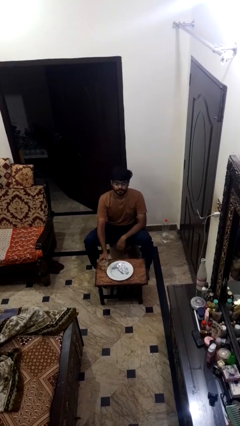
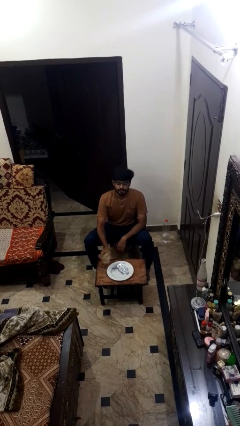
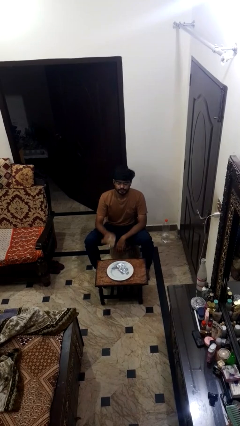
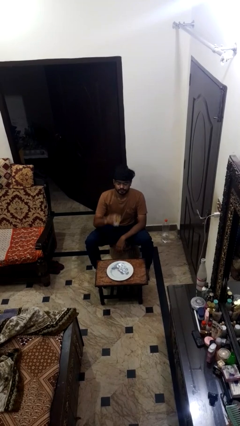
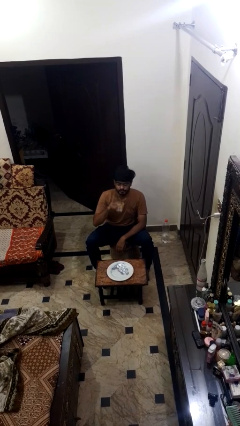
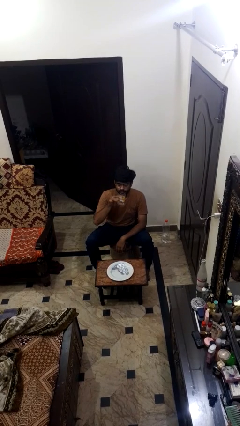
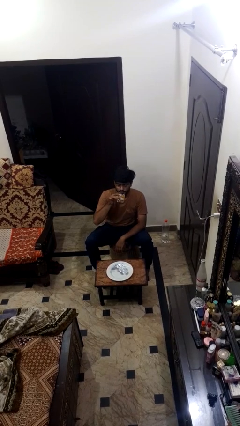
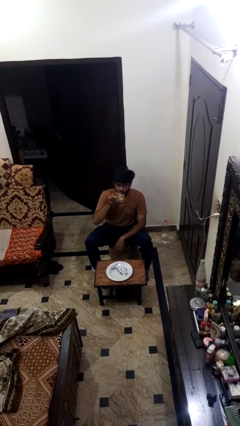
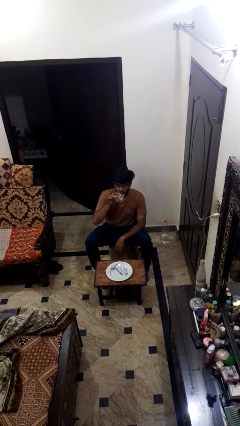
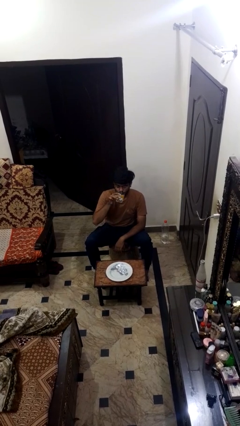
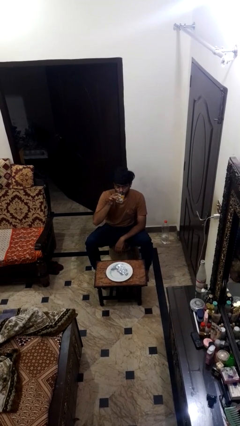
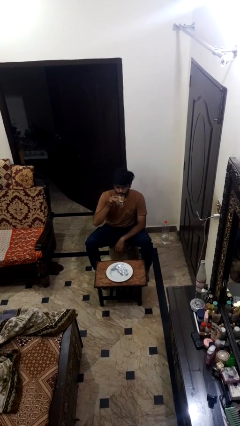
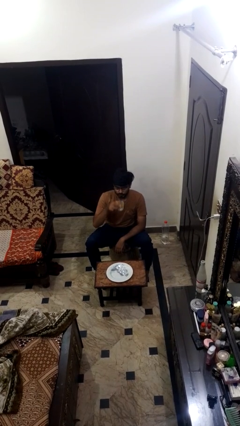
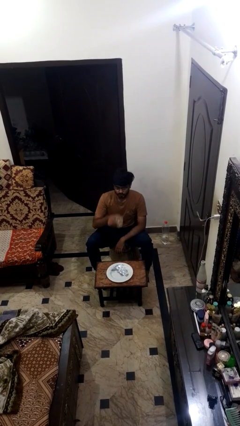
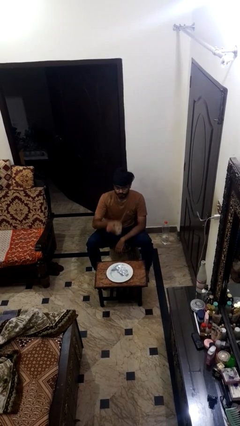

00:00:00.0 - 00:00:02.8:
person drinks from cup

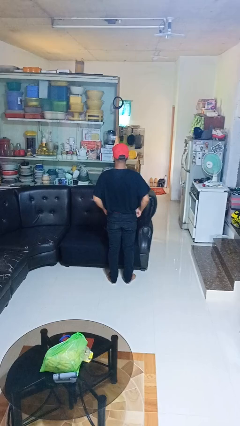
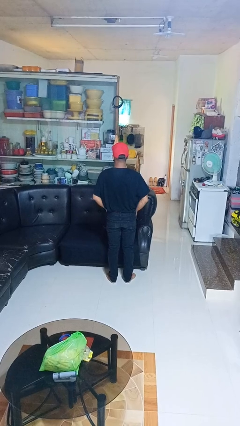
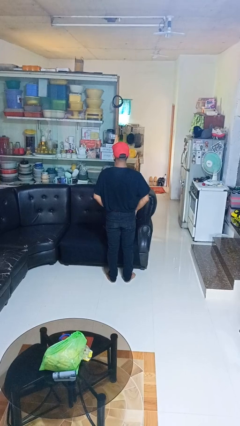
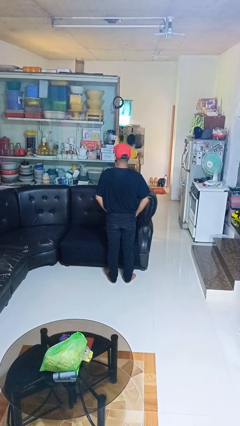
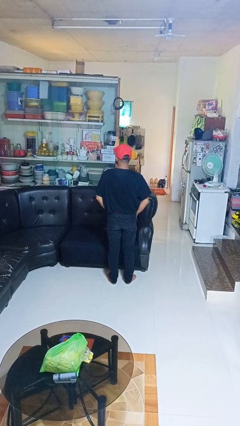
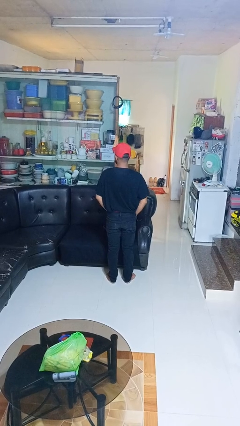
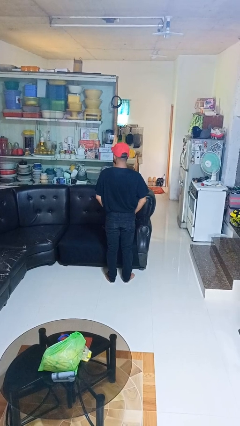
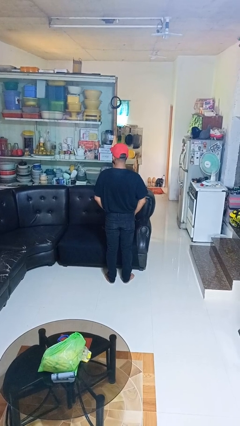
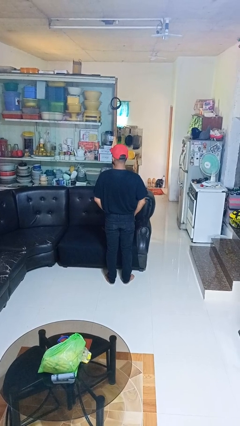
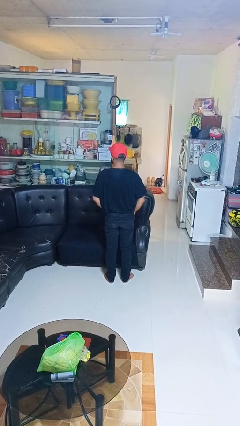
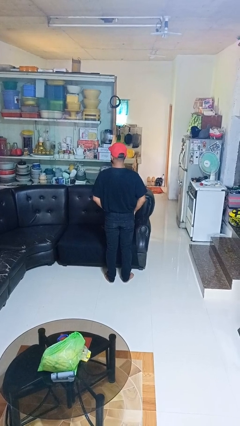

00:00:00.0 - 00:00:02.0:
person puts hands in back pockets

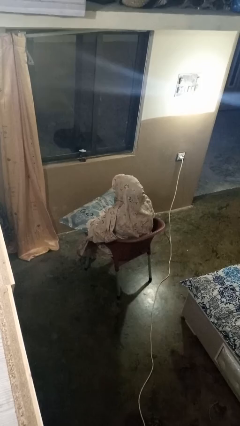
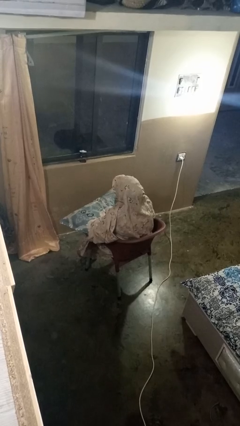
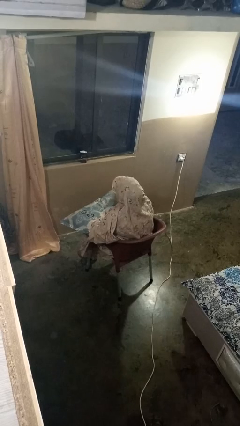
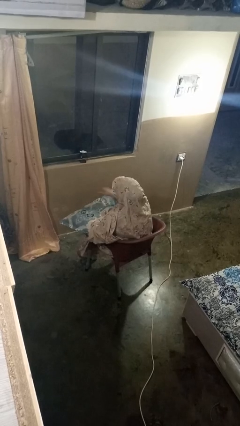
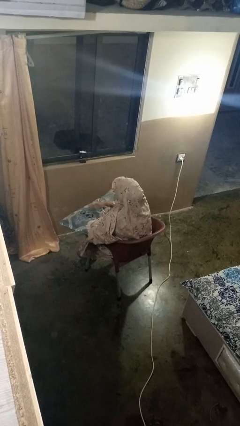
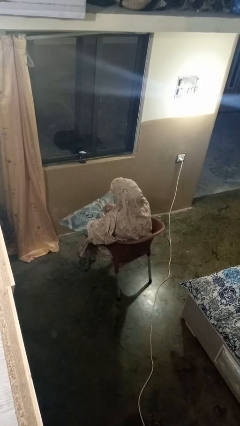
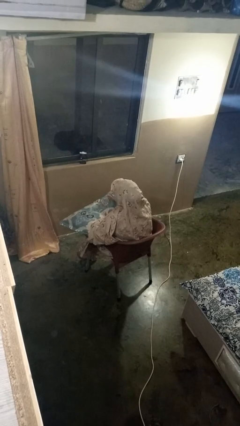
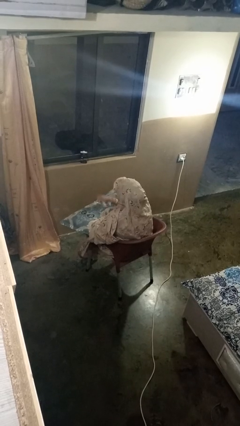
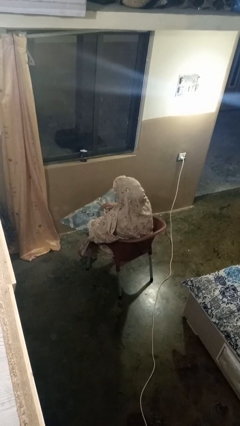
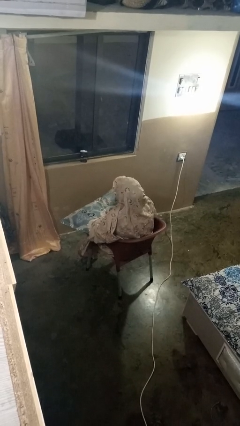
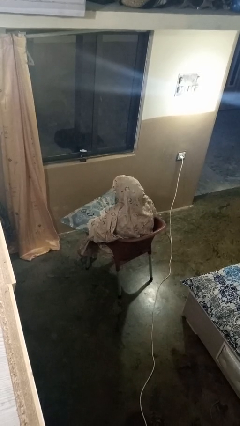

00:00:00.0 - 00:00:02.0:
person waves hand over object

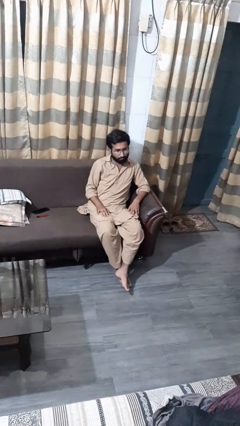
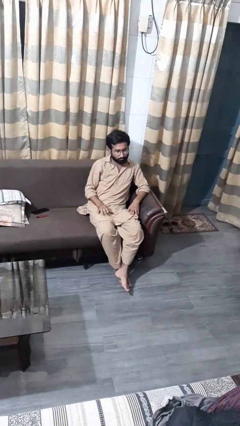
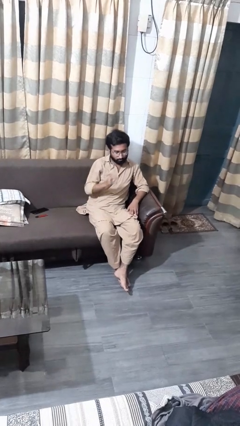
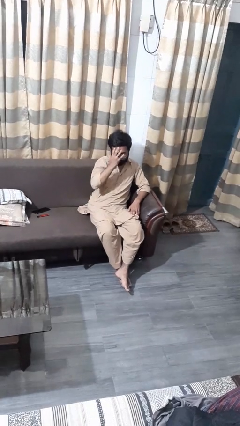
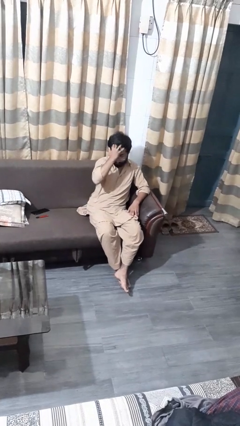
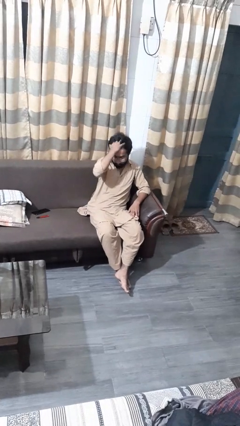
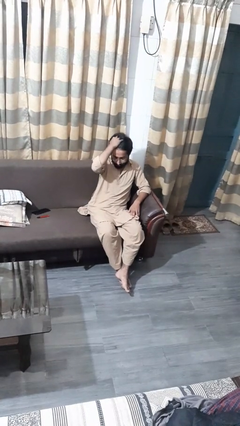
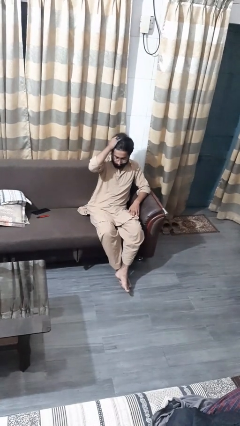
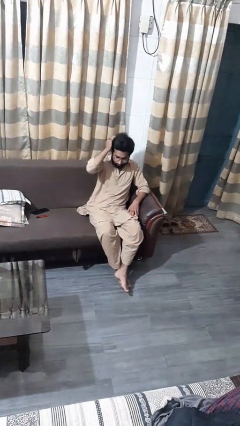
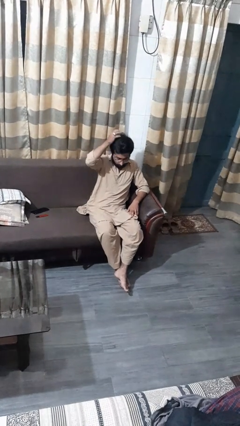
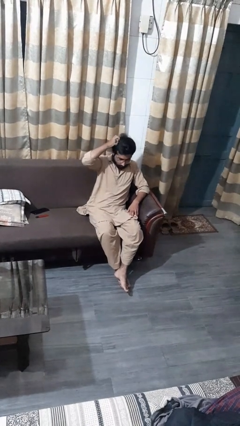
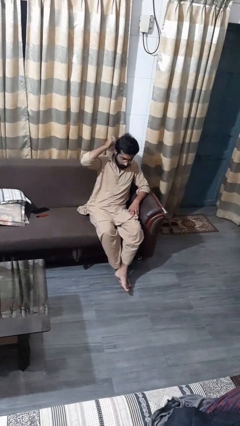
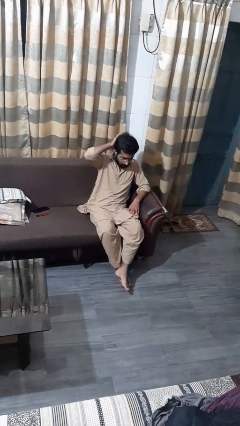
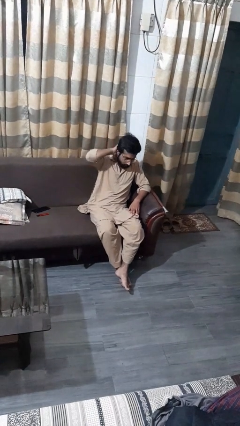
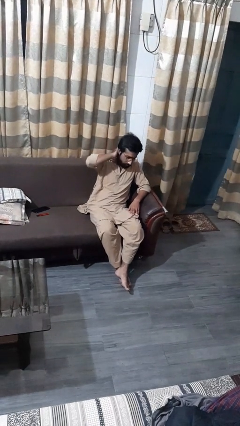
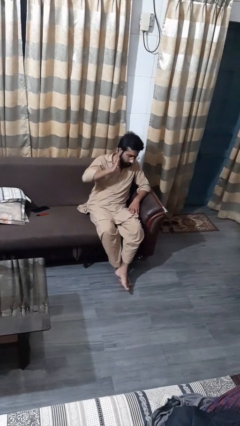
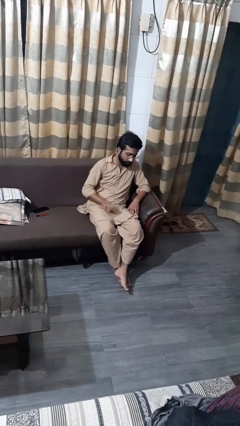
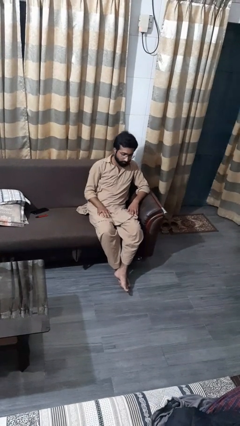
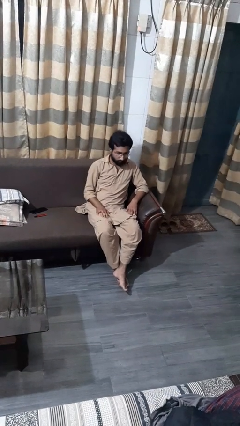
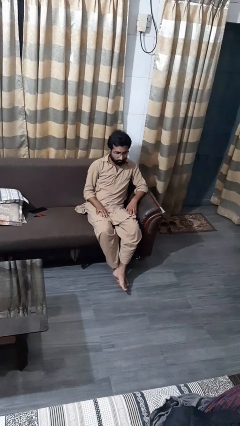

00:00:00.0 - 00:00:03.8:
person strokes hair

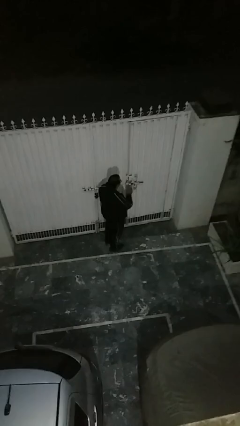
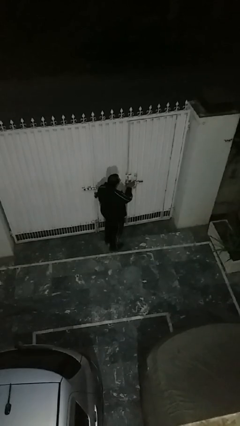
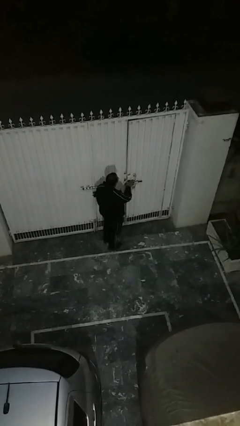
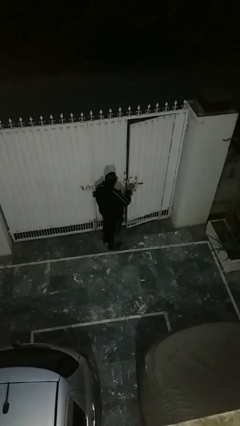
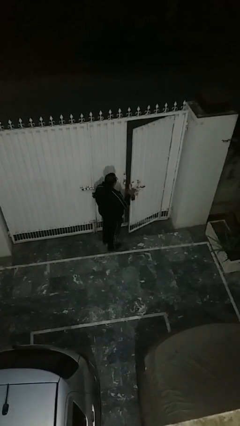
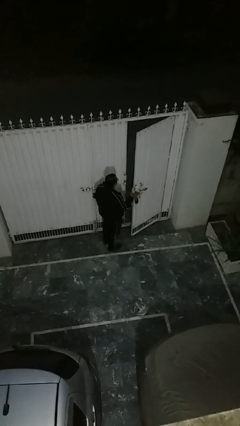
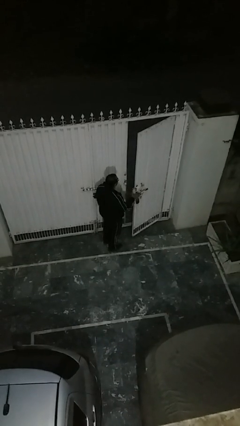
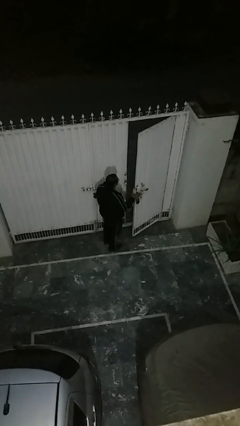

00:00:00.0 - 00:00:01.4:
person opens facility door

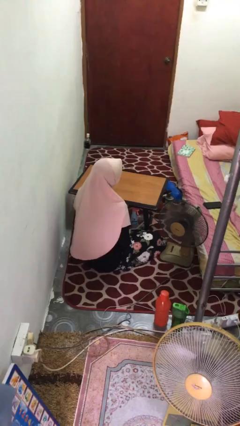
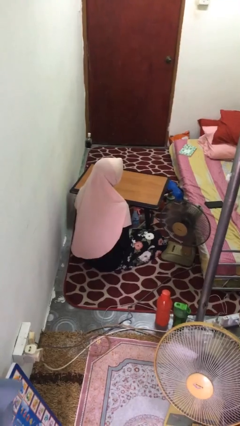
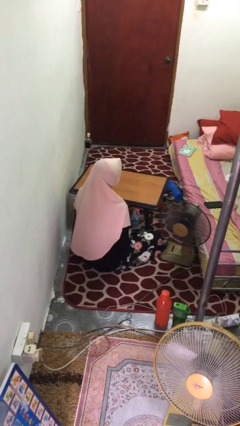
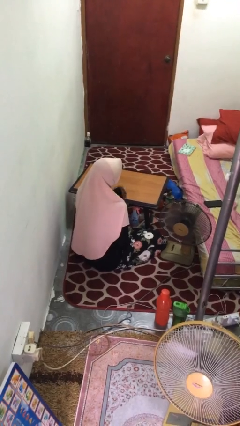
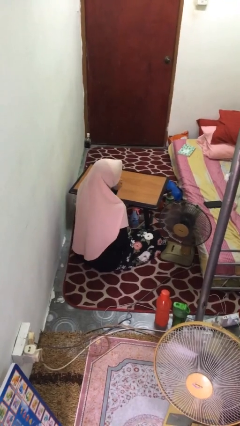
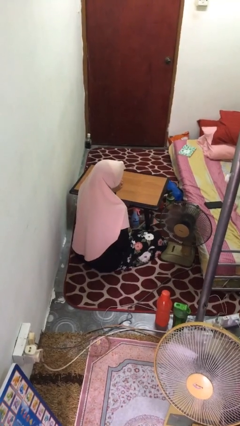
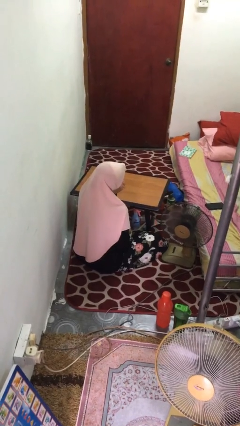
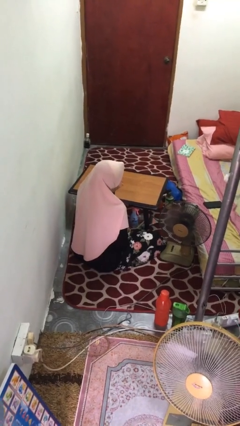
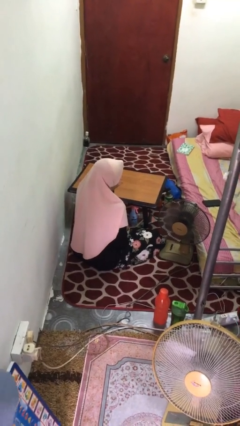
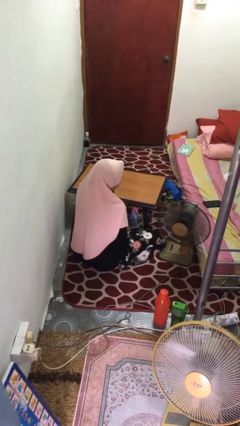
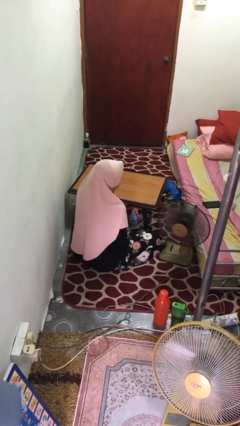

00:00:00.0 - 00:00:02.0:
person licks fingers

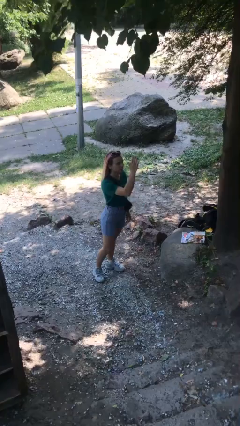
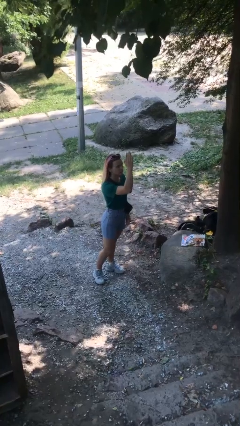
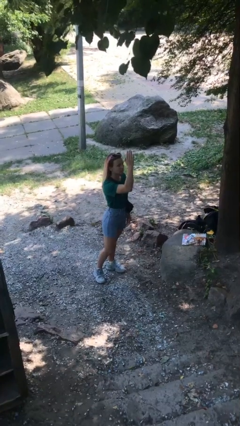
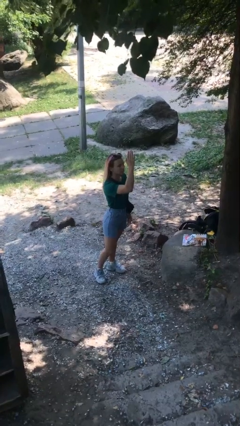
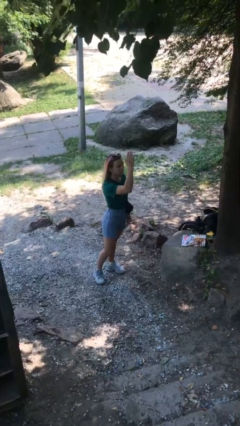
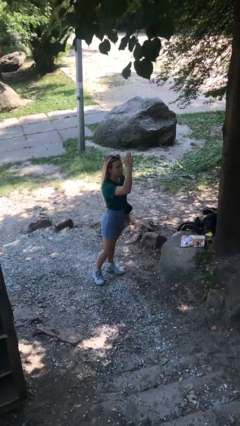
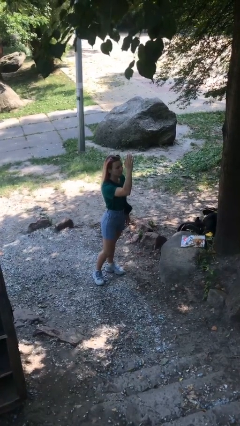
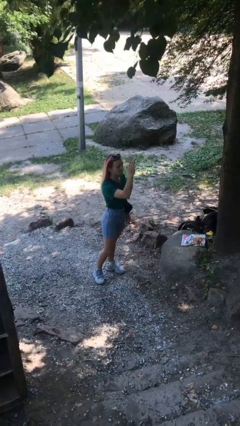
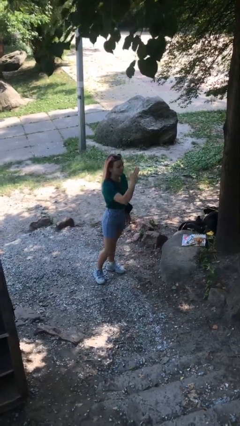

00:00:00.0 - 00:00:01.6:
person gestures raise hand

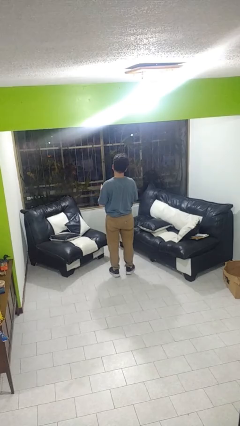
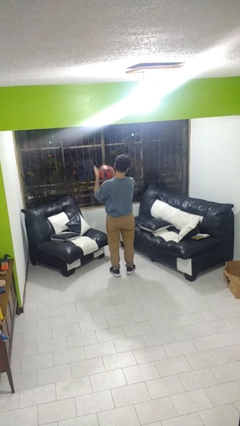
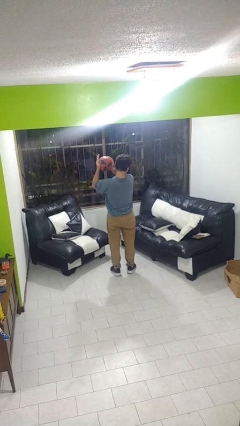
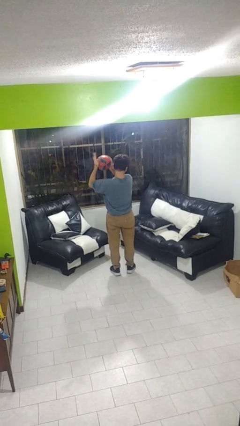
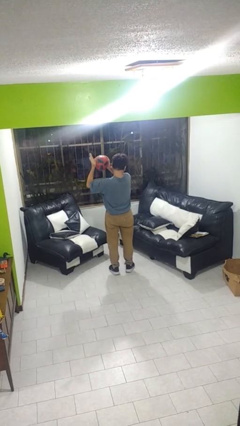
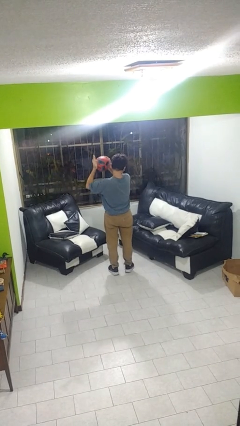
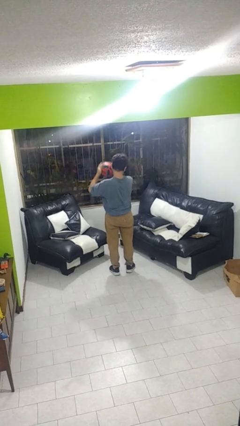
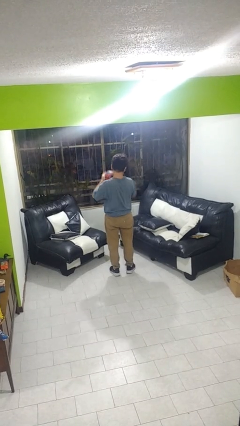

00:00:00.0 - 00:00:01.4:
person squeezes object
